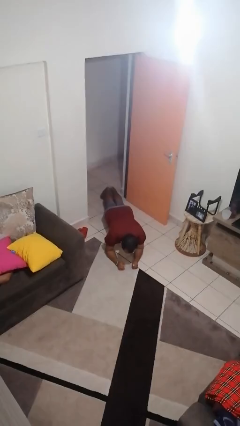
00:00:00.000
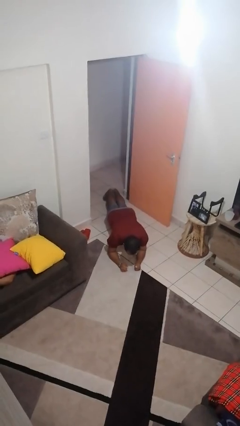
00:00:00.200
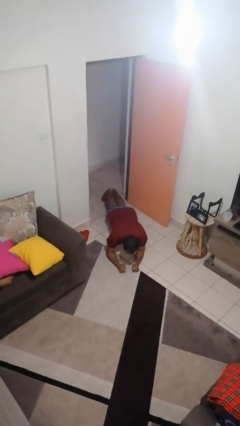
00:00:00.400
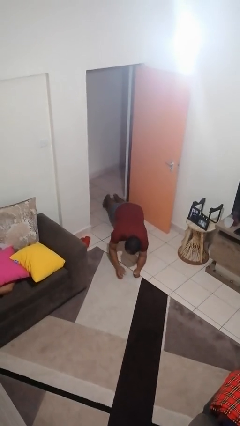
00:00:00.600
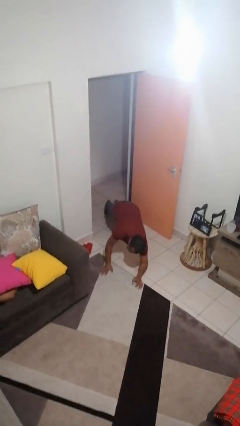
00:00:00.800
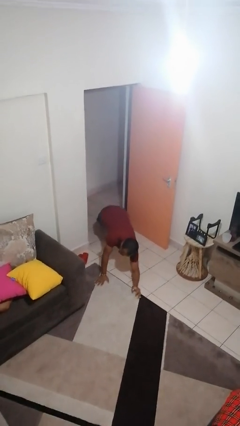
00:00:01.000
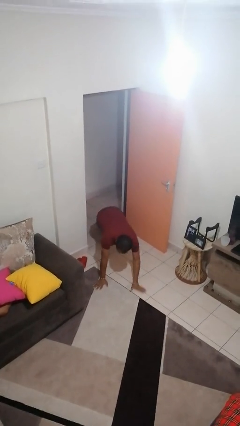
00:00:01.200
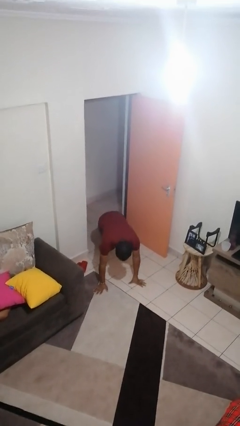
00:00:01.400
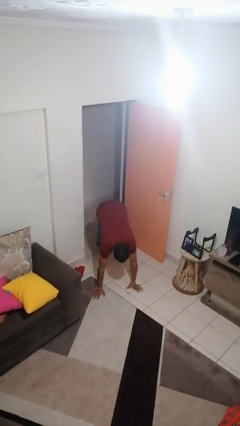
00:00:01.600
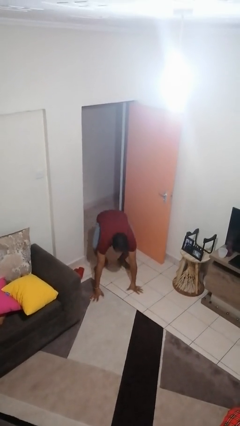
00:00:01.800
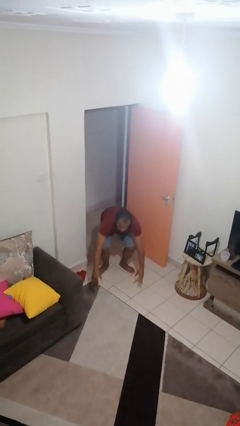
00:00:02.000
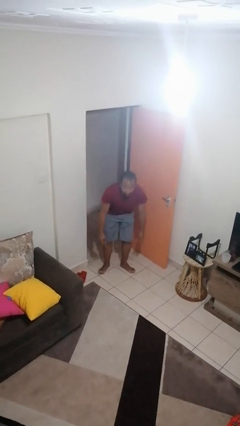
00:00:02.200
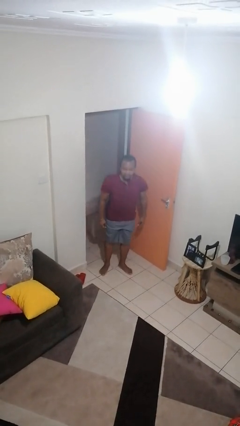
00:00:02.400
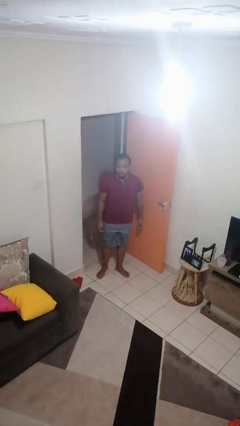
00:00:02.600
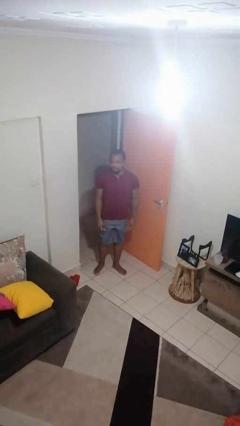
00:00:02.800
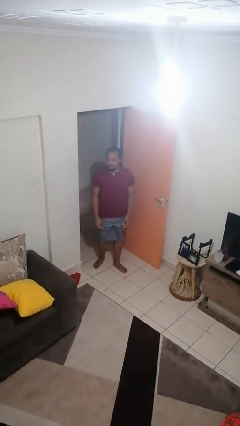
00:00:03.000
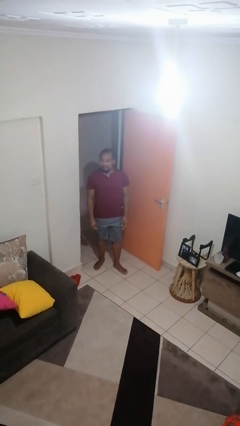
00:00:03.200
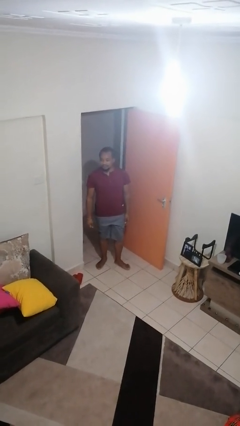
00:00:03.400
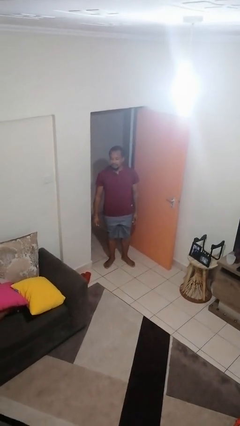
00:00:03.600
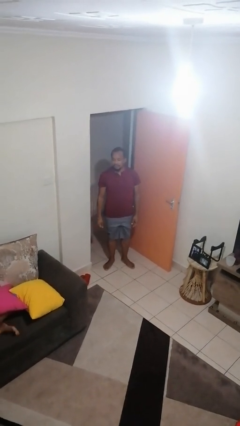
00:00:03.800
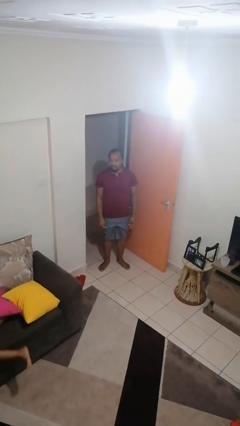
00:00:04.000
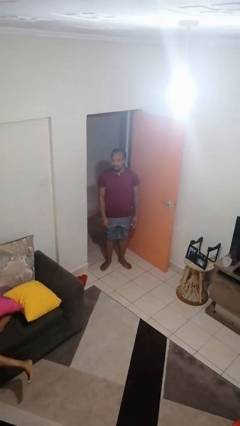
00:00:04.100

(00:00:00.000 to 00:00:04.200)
person stands up from floor

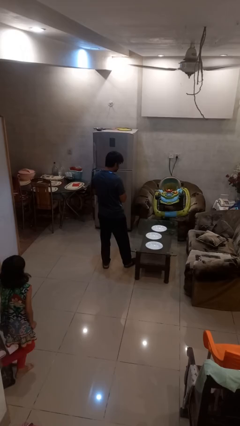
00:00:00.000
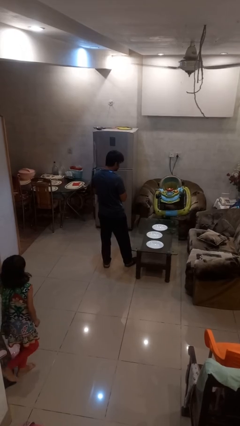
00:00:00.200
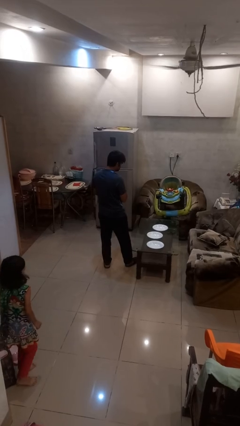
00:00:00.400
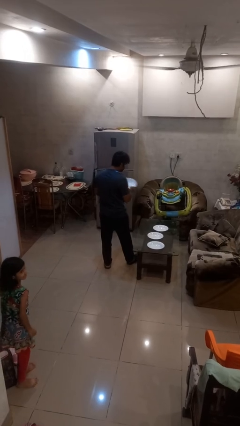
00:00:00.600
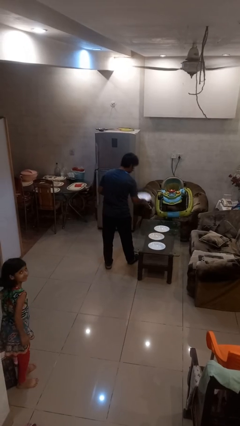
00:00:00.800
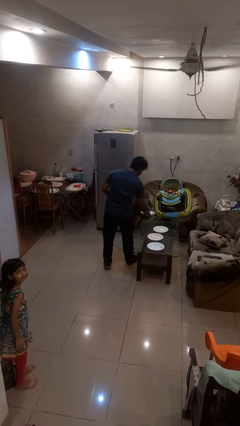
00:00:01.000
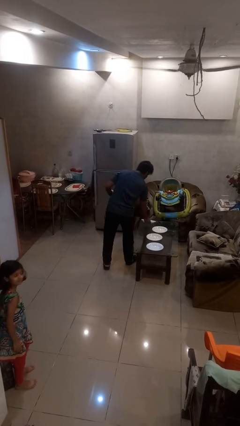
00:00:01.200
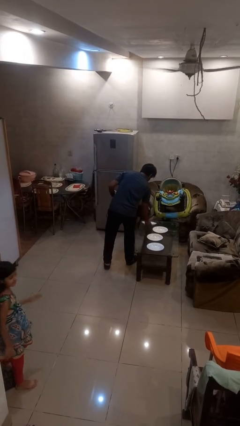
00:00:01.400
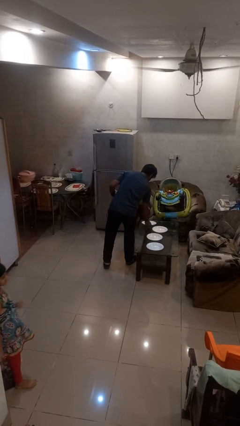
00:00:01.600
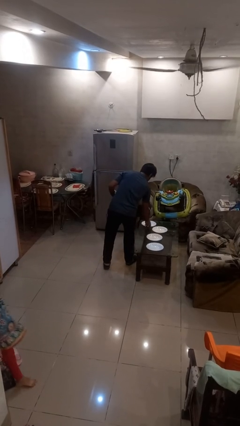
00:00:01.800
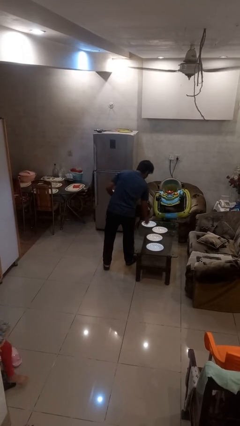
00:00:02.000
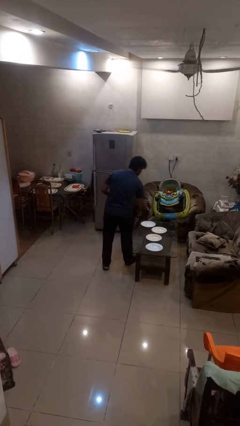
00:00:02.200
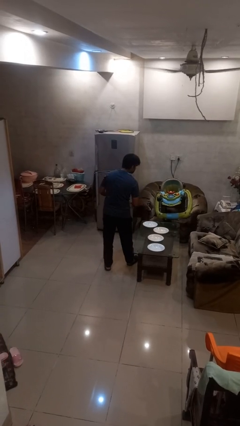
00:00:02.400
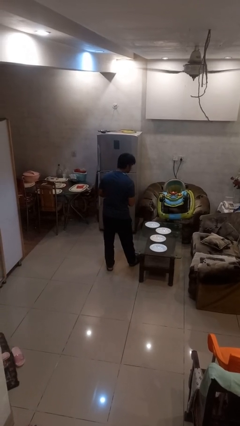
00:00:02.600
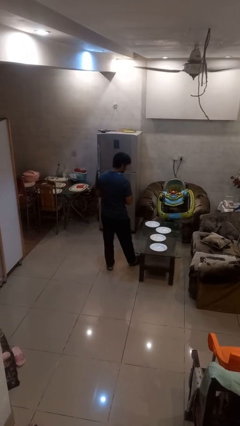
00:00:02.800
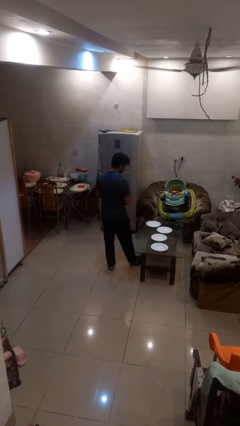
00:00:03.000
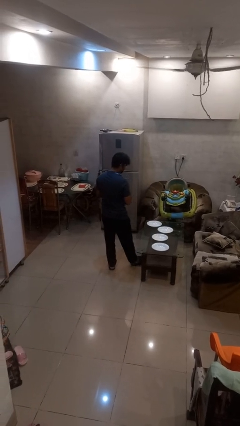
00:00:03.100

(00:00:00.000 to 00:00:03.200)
person sets table

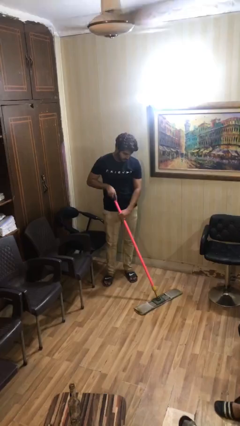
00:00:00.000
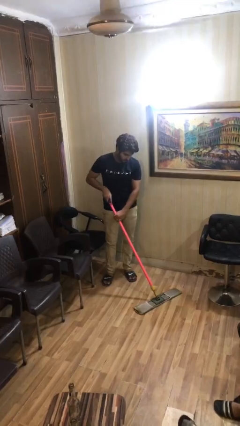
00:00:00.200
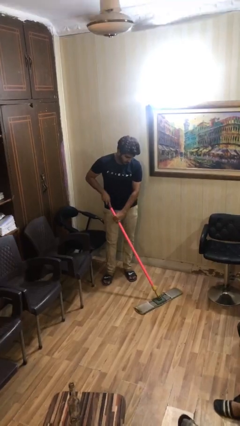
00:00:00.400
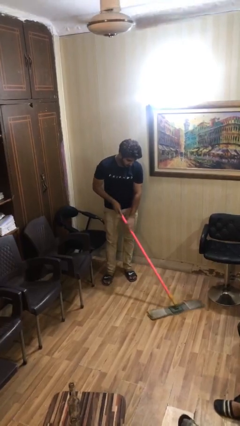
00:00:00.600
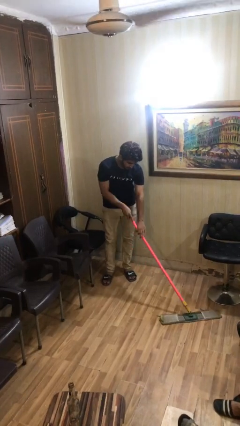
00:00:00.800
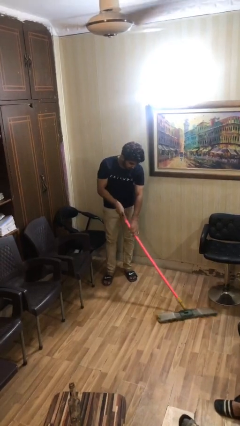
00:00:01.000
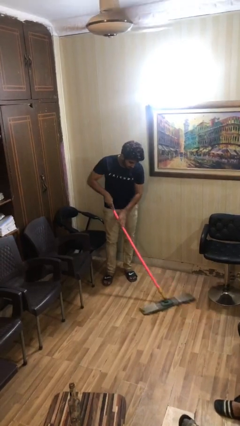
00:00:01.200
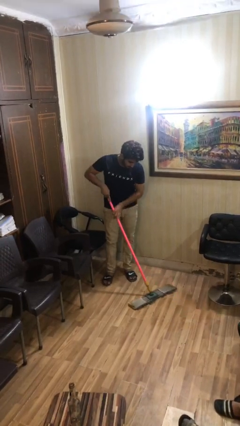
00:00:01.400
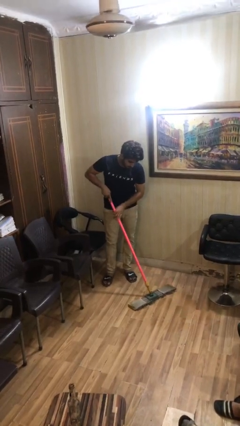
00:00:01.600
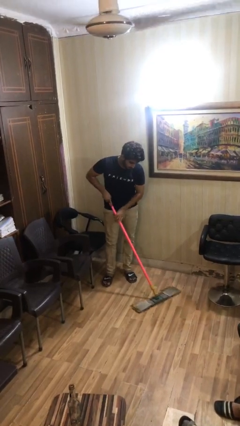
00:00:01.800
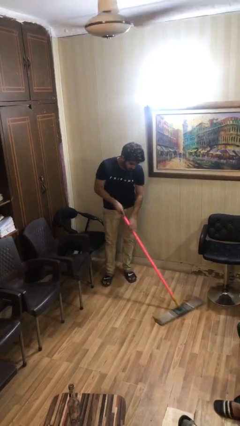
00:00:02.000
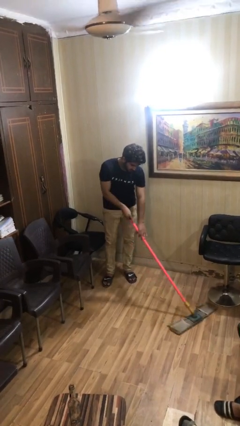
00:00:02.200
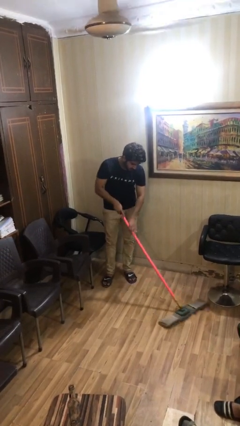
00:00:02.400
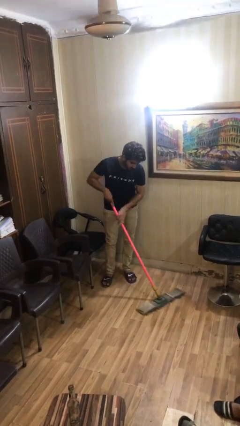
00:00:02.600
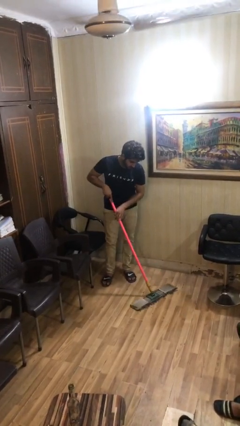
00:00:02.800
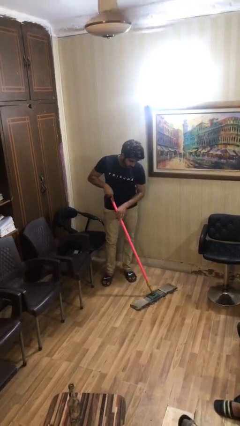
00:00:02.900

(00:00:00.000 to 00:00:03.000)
person sweeps floor

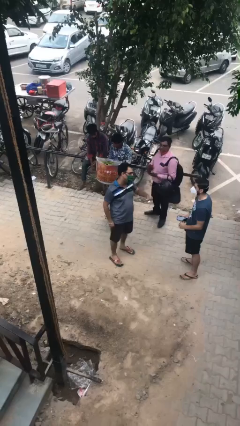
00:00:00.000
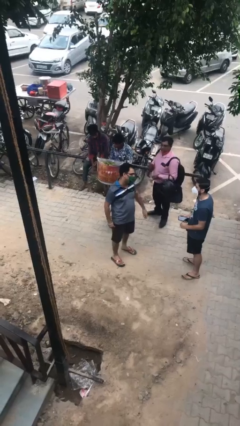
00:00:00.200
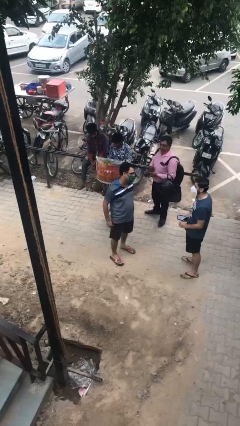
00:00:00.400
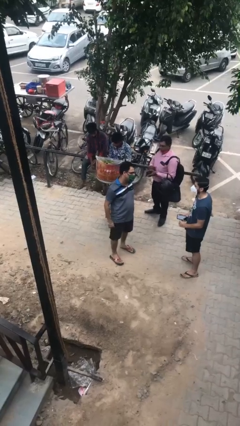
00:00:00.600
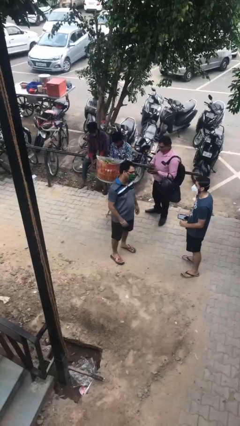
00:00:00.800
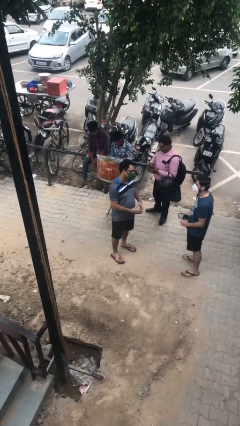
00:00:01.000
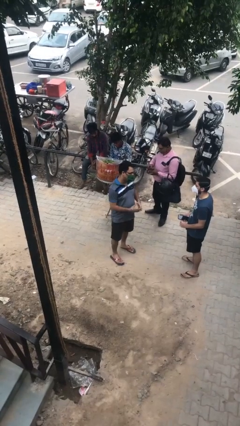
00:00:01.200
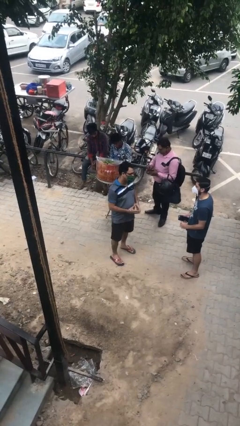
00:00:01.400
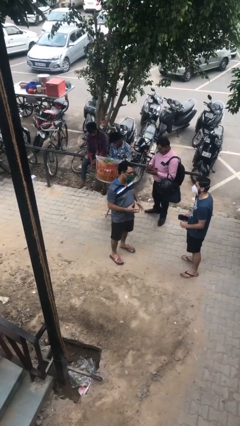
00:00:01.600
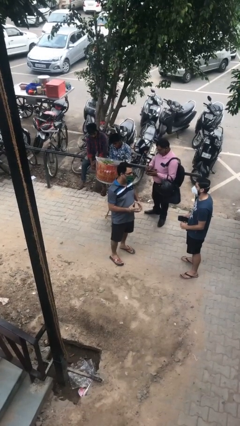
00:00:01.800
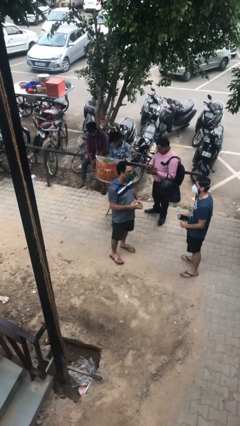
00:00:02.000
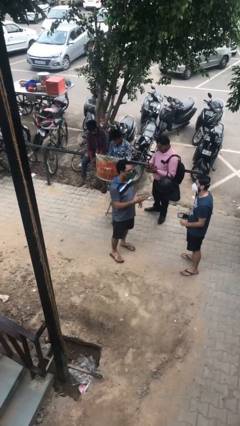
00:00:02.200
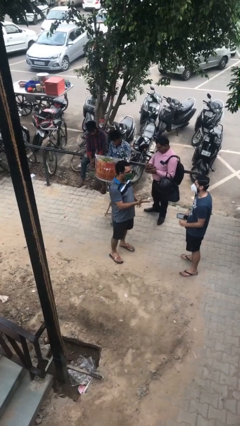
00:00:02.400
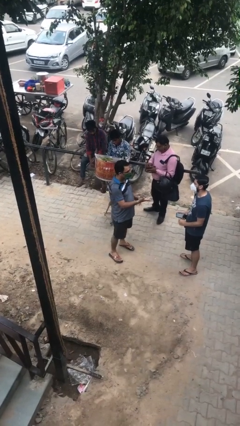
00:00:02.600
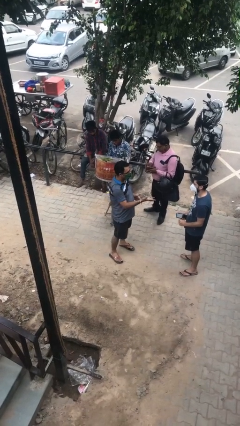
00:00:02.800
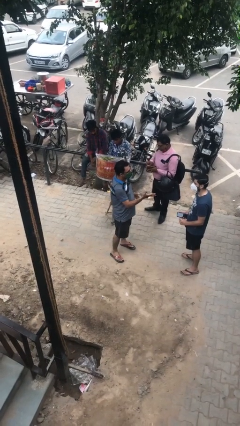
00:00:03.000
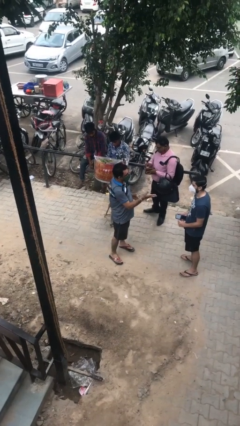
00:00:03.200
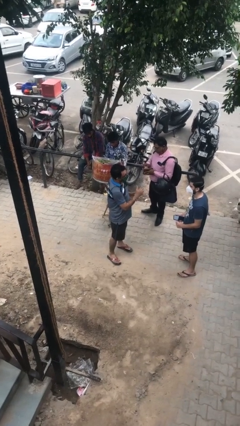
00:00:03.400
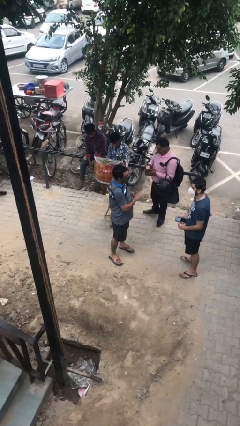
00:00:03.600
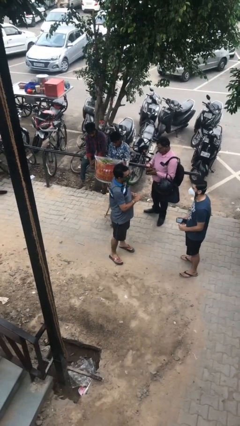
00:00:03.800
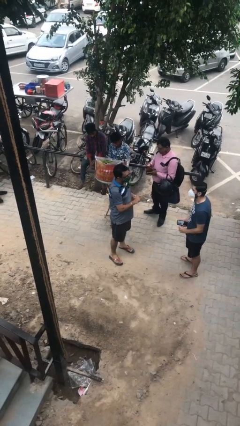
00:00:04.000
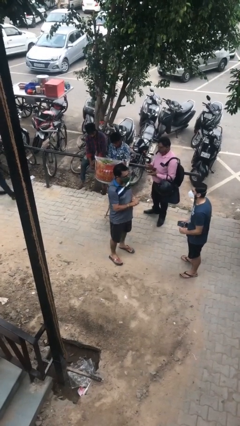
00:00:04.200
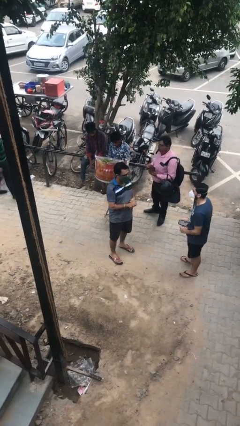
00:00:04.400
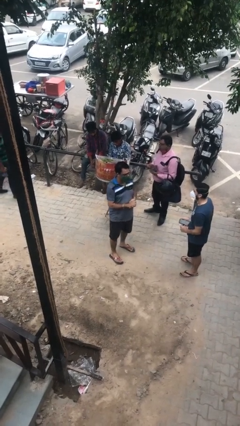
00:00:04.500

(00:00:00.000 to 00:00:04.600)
person talks to person

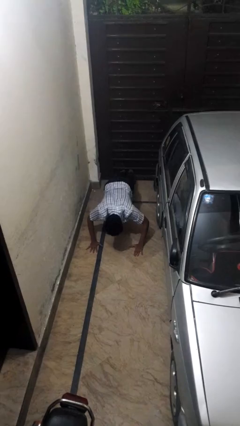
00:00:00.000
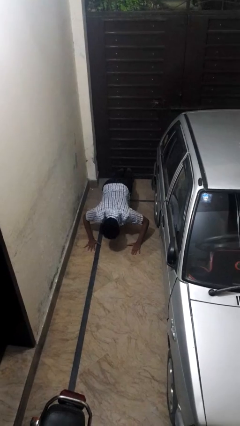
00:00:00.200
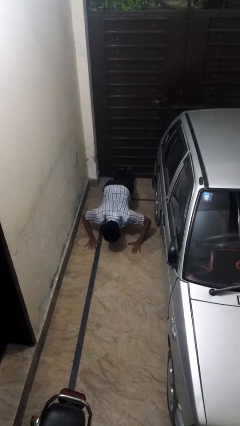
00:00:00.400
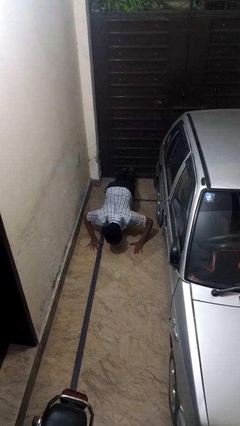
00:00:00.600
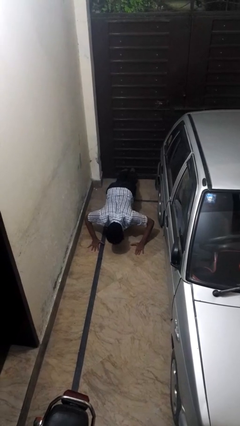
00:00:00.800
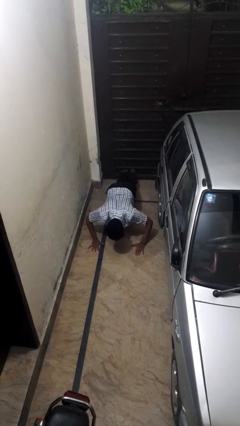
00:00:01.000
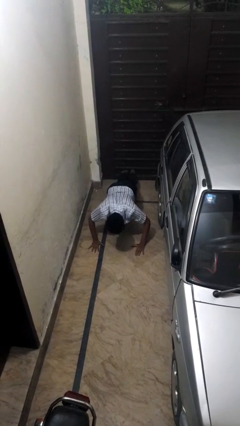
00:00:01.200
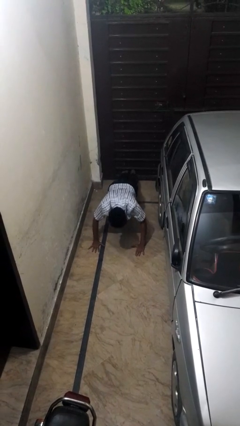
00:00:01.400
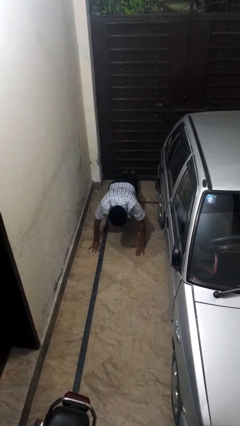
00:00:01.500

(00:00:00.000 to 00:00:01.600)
person exercises with pushup

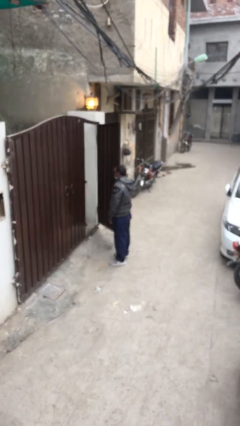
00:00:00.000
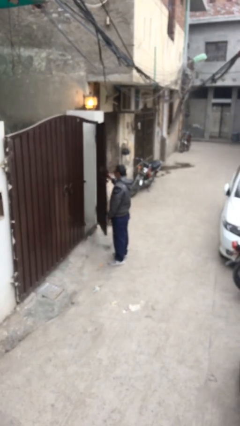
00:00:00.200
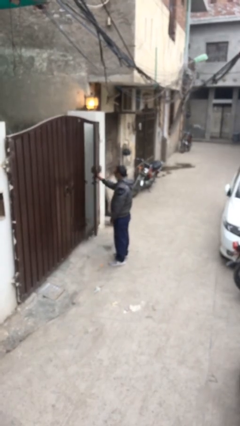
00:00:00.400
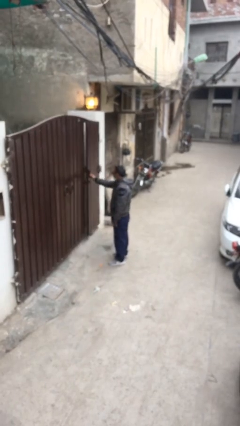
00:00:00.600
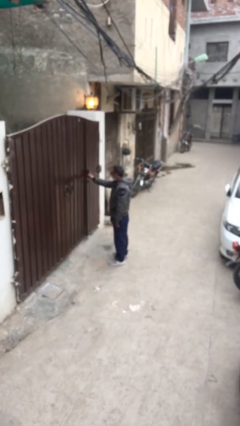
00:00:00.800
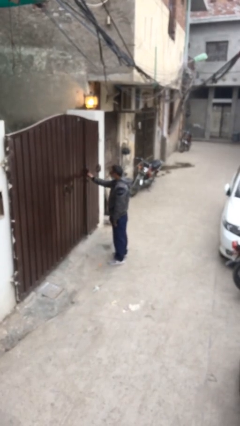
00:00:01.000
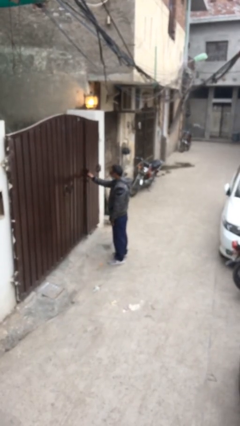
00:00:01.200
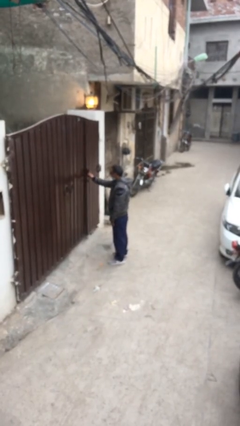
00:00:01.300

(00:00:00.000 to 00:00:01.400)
person closes facility door
